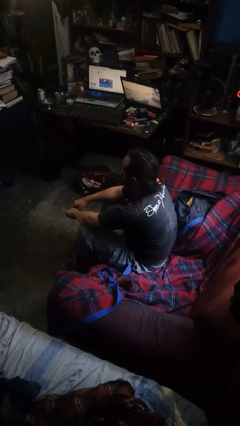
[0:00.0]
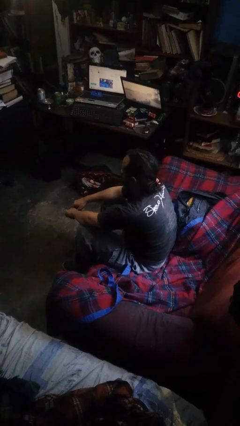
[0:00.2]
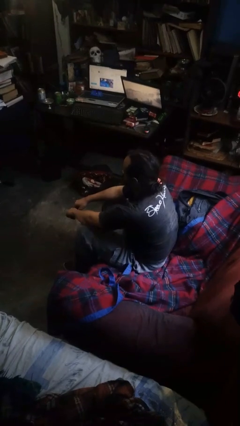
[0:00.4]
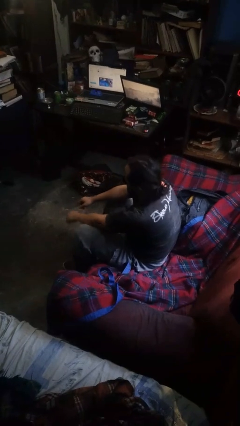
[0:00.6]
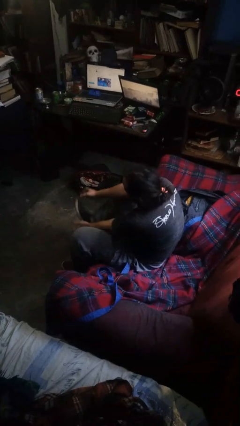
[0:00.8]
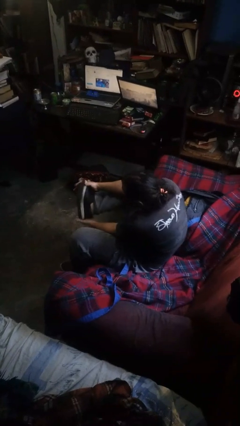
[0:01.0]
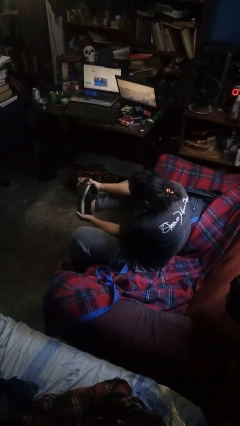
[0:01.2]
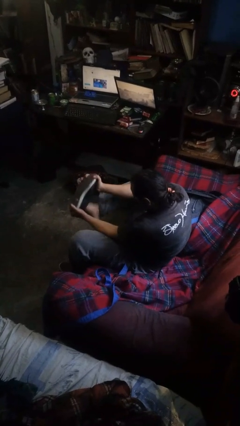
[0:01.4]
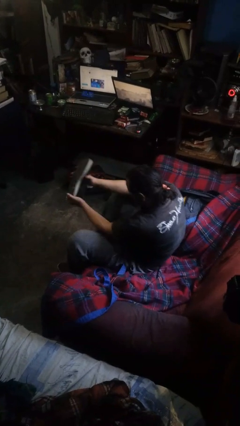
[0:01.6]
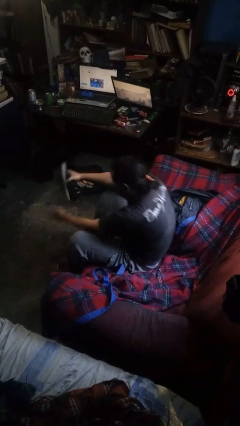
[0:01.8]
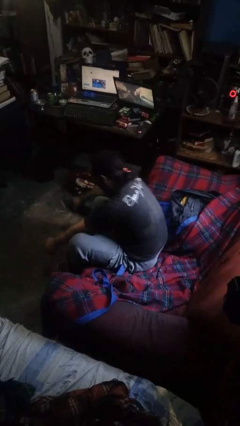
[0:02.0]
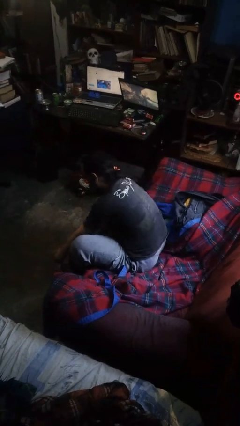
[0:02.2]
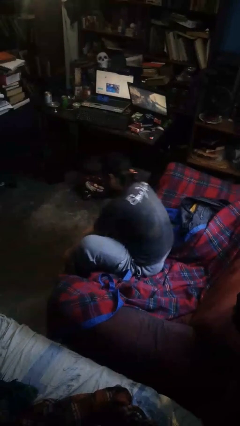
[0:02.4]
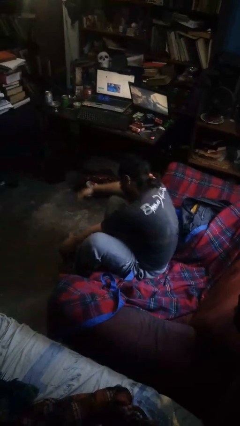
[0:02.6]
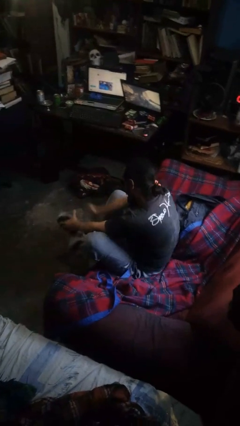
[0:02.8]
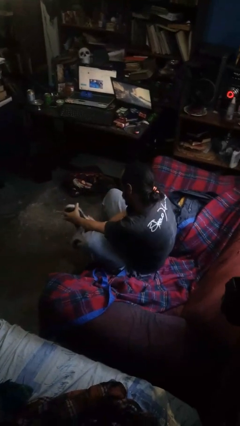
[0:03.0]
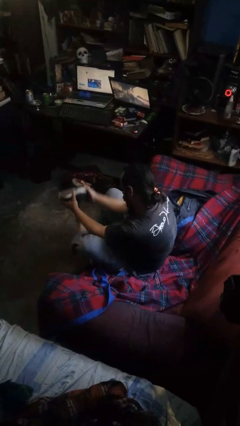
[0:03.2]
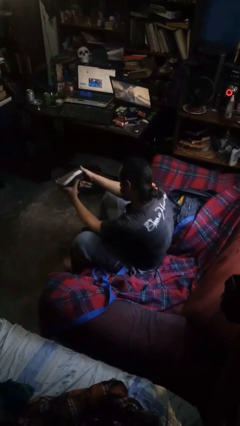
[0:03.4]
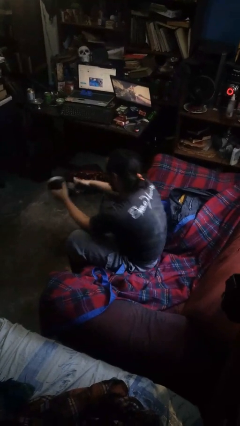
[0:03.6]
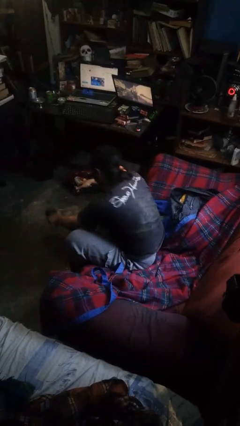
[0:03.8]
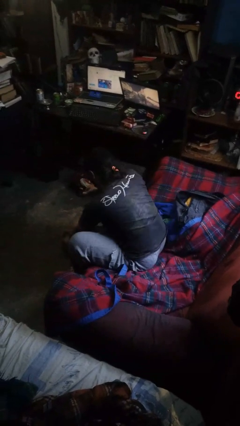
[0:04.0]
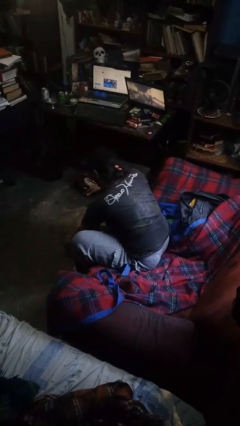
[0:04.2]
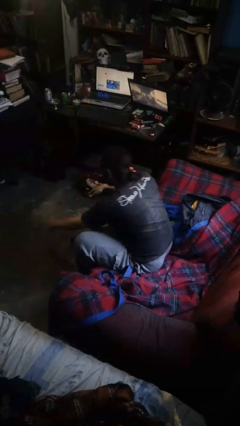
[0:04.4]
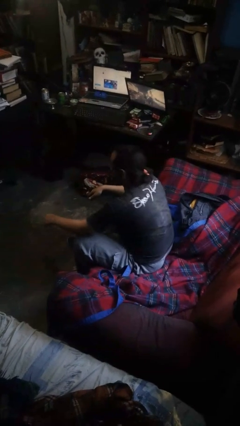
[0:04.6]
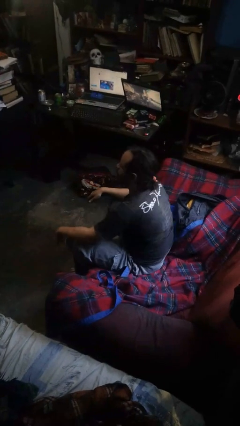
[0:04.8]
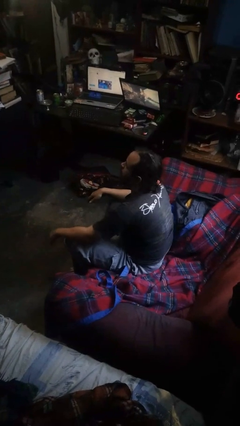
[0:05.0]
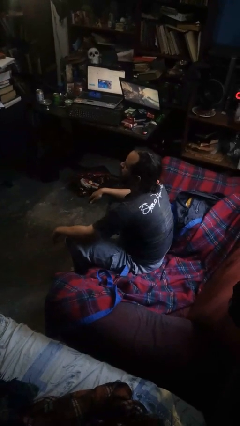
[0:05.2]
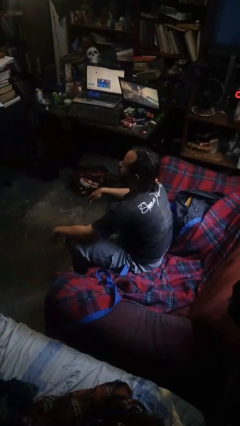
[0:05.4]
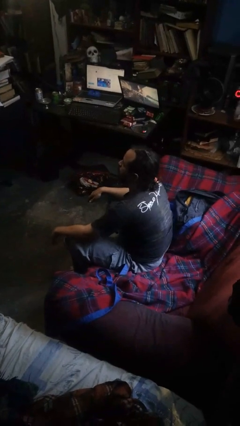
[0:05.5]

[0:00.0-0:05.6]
person takes off shoes

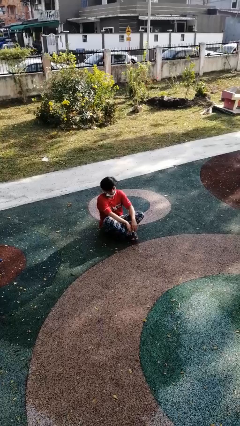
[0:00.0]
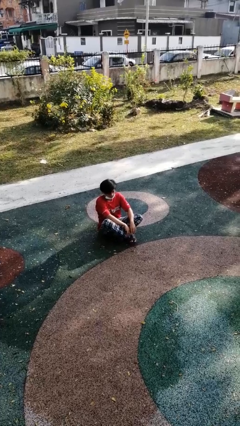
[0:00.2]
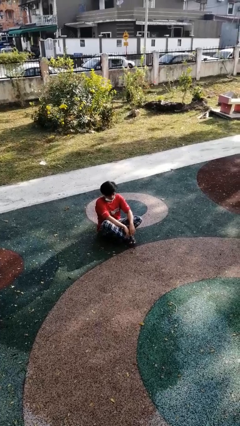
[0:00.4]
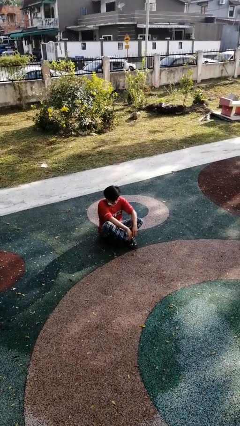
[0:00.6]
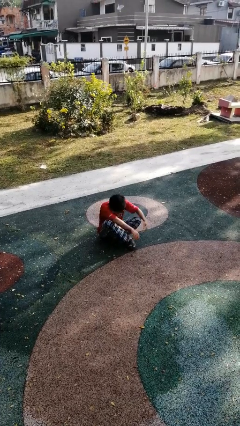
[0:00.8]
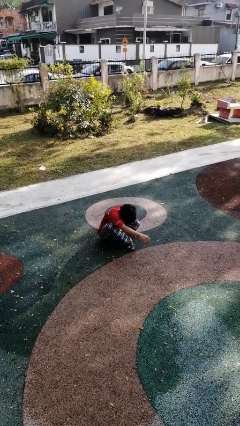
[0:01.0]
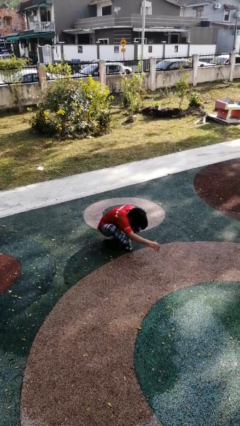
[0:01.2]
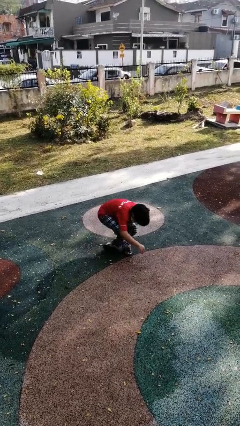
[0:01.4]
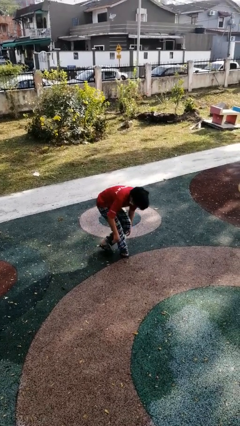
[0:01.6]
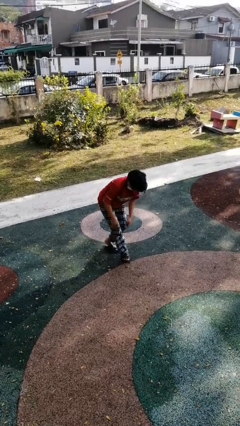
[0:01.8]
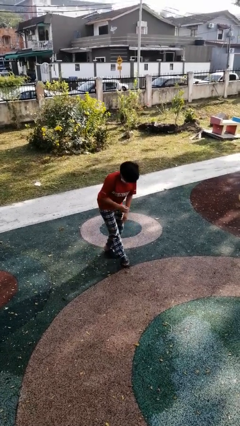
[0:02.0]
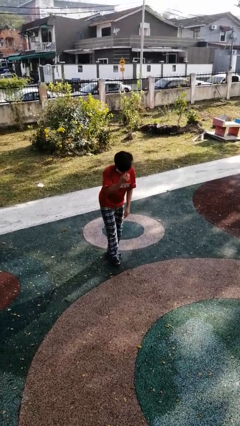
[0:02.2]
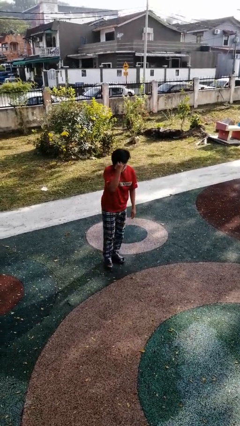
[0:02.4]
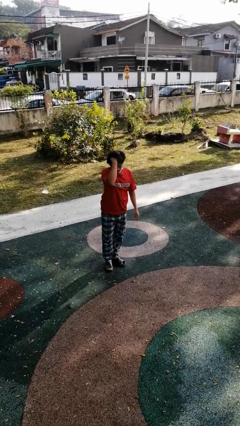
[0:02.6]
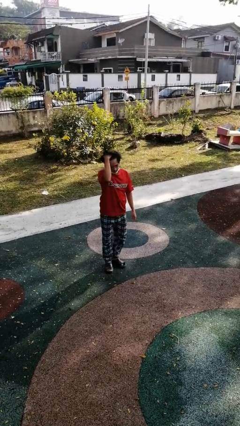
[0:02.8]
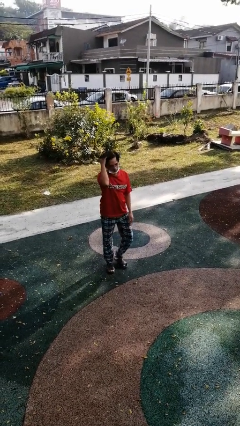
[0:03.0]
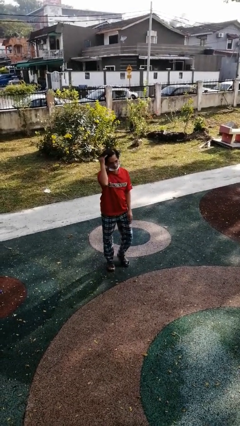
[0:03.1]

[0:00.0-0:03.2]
person stands up from floor

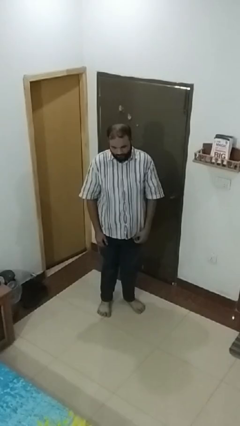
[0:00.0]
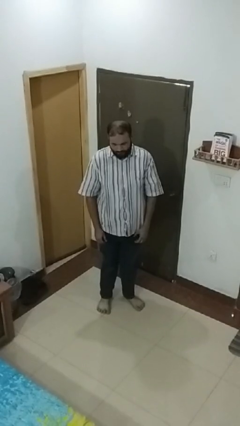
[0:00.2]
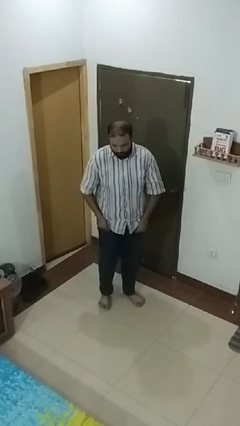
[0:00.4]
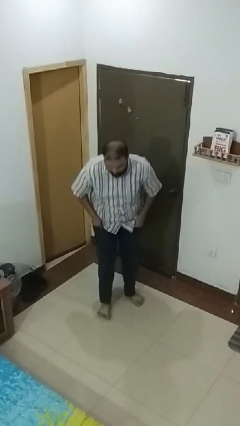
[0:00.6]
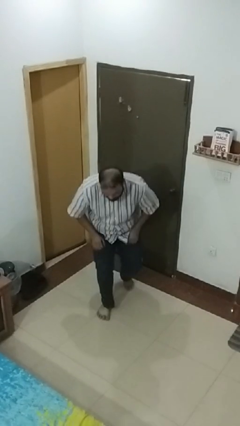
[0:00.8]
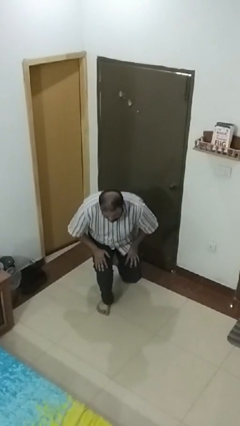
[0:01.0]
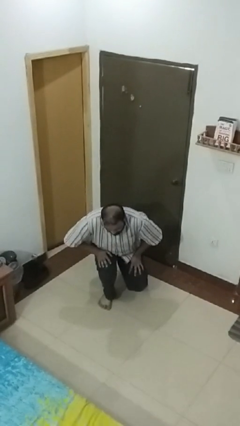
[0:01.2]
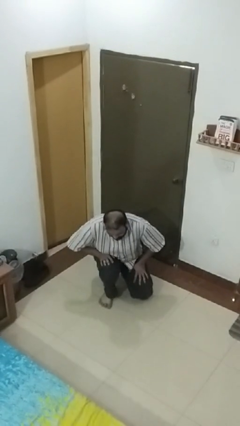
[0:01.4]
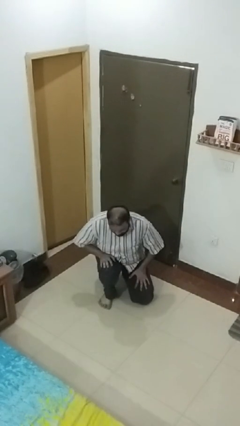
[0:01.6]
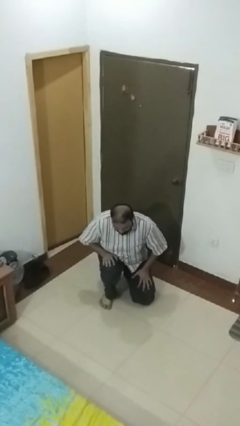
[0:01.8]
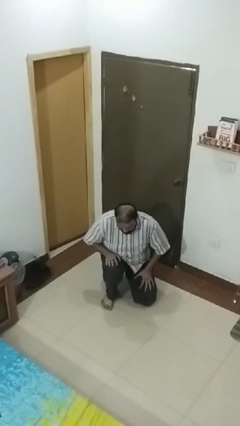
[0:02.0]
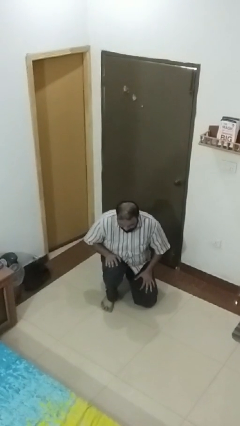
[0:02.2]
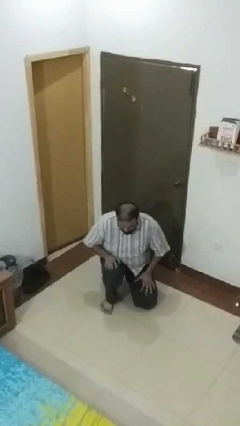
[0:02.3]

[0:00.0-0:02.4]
person kneels

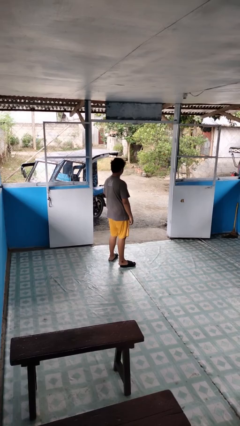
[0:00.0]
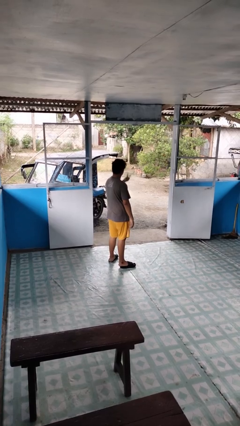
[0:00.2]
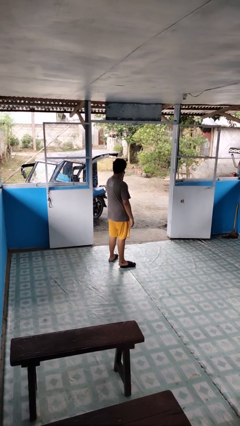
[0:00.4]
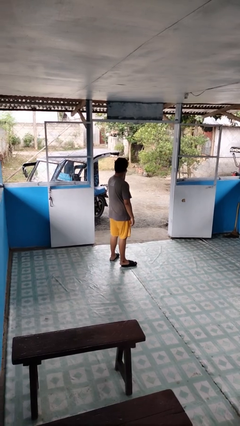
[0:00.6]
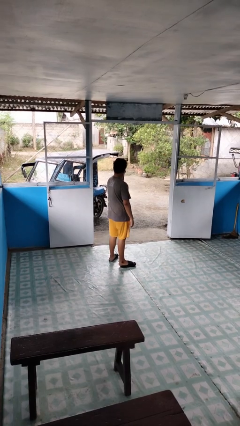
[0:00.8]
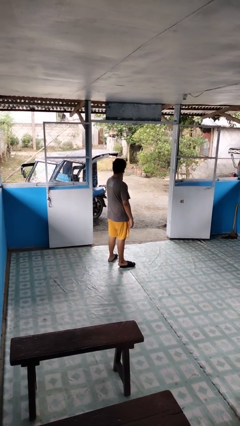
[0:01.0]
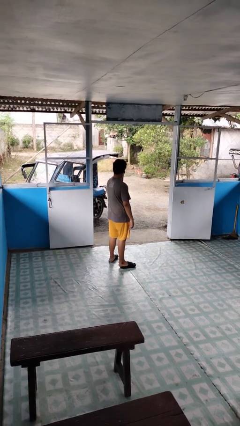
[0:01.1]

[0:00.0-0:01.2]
person gestures watch closely

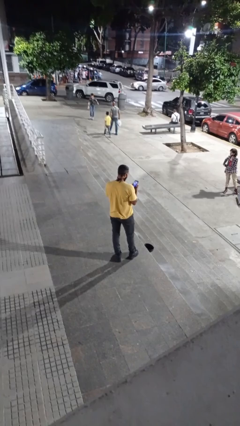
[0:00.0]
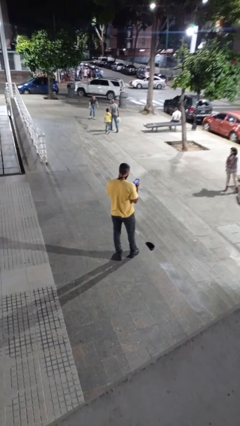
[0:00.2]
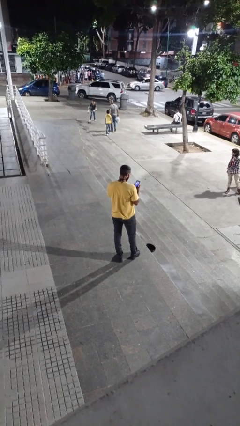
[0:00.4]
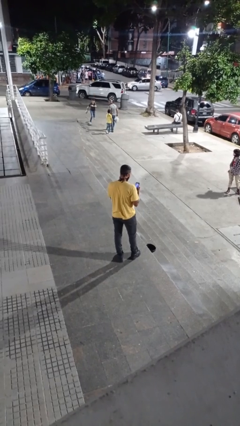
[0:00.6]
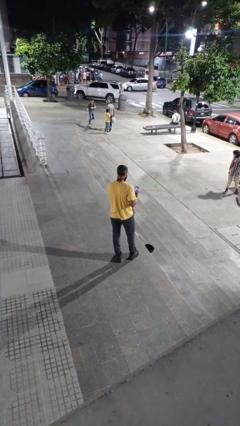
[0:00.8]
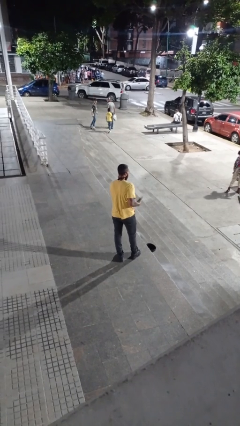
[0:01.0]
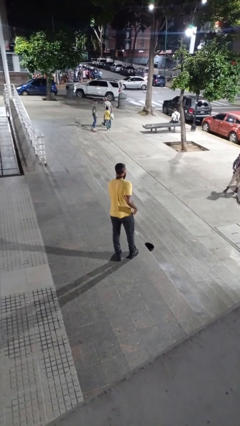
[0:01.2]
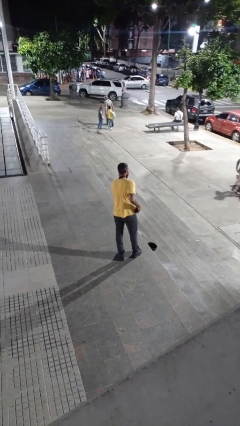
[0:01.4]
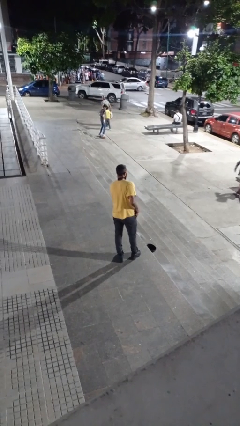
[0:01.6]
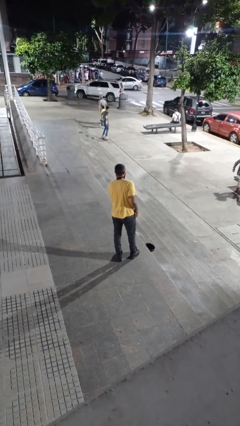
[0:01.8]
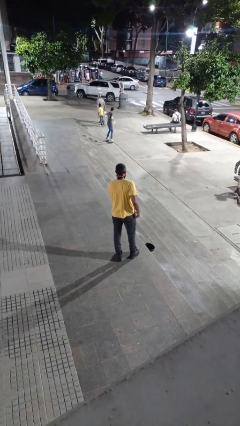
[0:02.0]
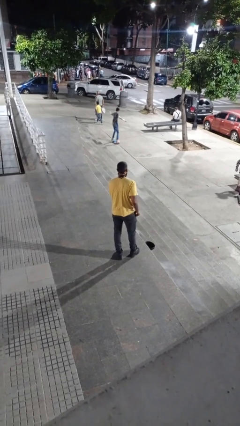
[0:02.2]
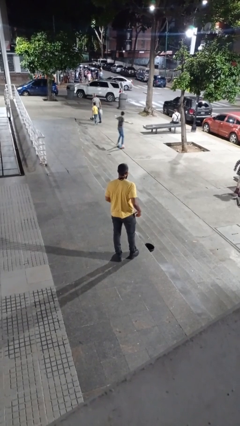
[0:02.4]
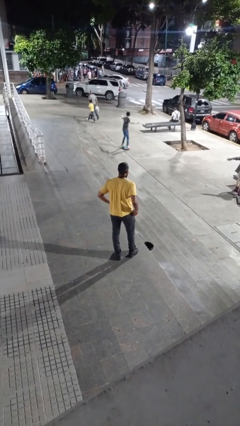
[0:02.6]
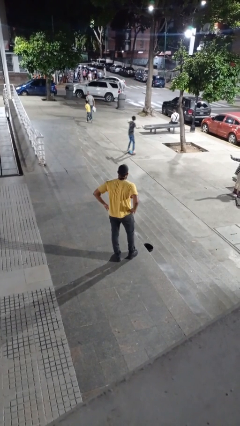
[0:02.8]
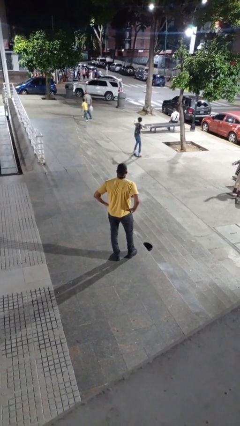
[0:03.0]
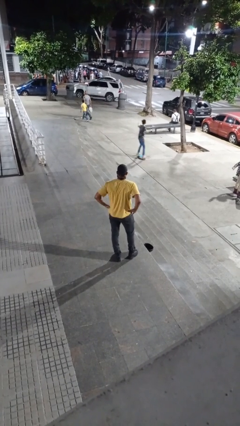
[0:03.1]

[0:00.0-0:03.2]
person puts phone into pocket

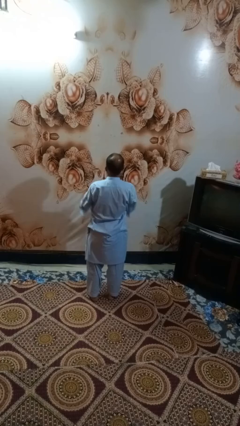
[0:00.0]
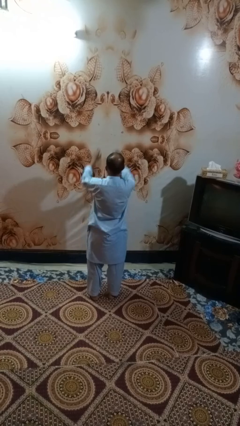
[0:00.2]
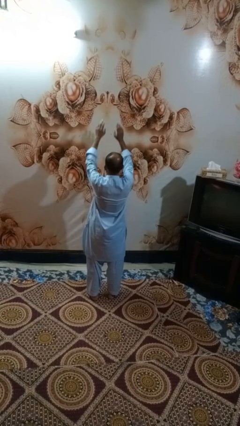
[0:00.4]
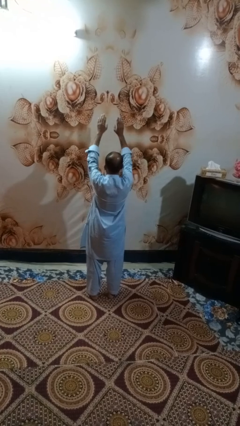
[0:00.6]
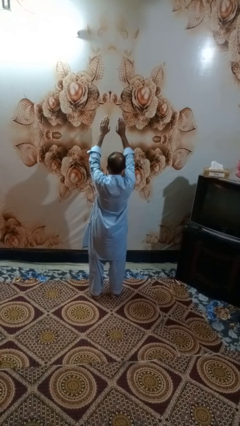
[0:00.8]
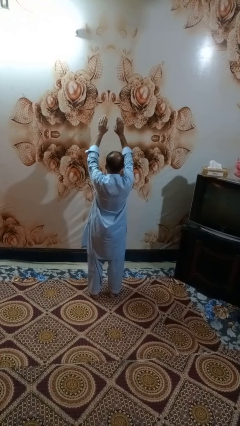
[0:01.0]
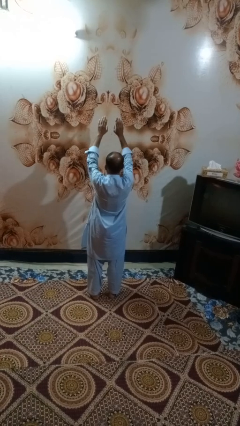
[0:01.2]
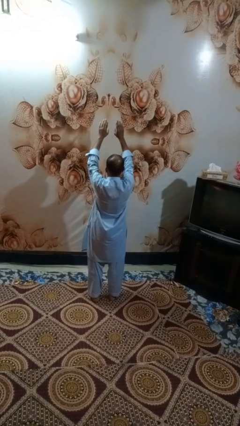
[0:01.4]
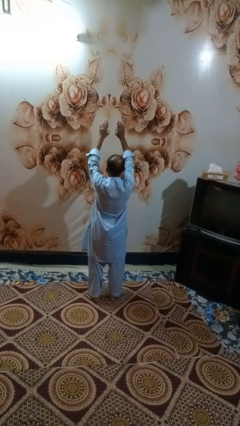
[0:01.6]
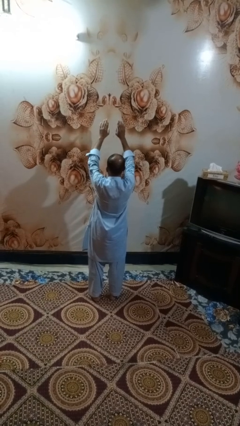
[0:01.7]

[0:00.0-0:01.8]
person gestures swipe up
